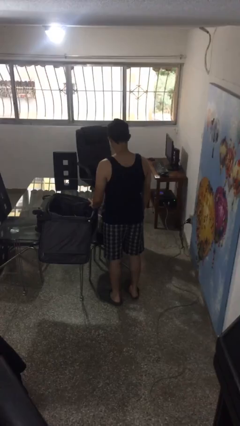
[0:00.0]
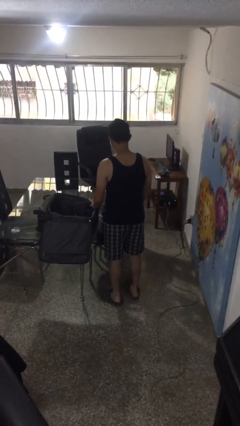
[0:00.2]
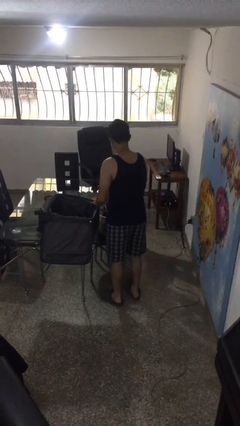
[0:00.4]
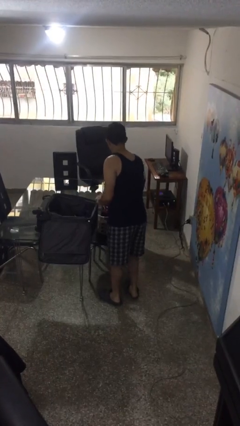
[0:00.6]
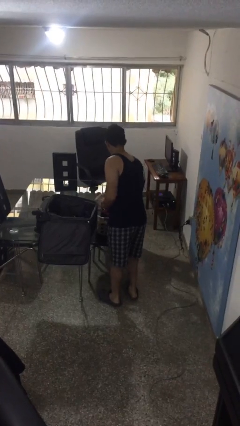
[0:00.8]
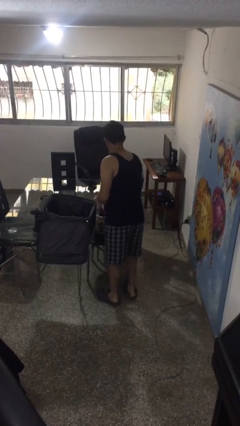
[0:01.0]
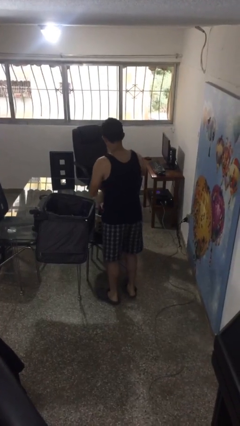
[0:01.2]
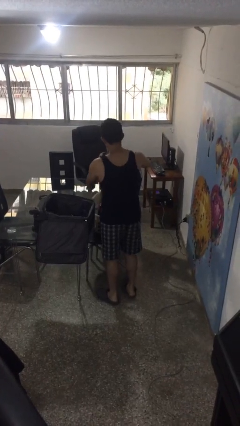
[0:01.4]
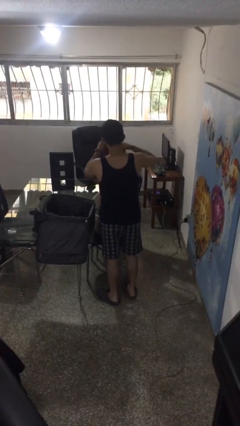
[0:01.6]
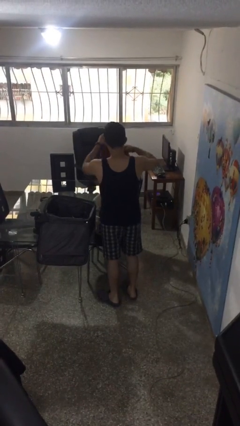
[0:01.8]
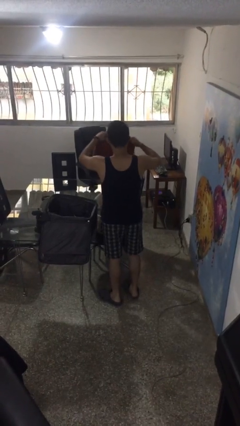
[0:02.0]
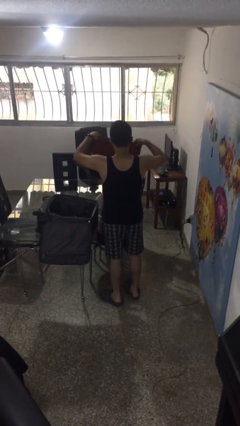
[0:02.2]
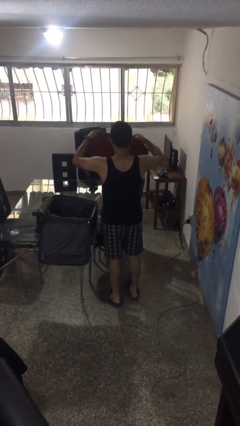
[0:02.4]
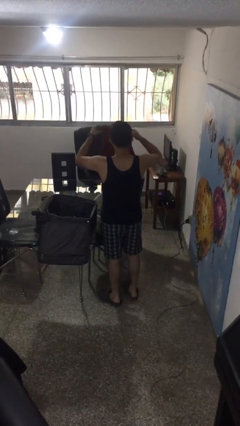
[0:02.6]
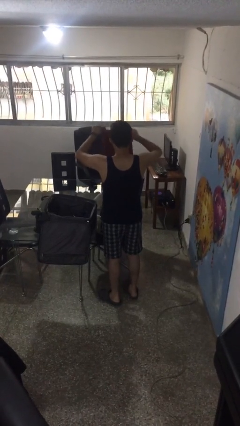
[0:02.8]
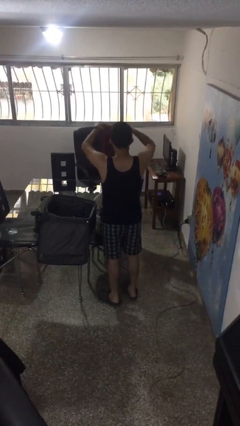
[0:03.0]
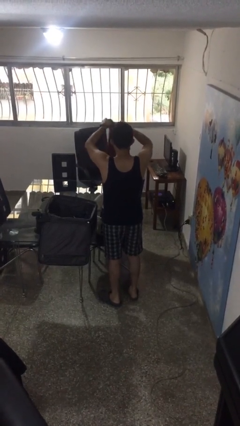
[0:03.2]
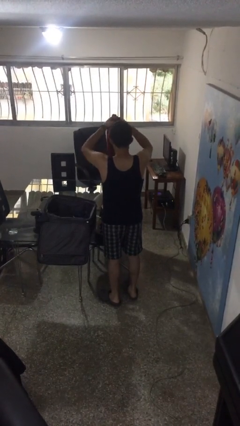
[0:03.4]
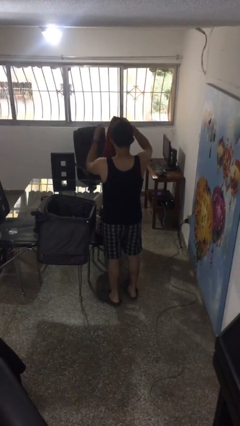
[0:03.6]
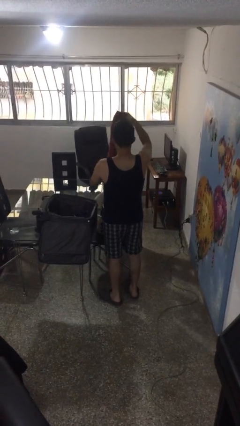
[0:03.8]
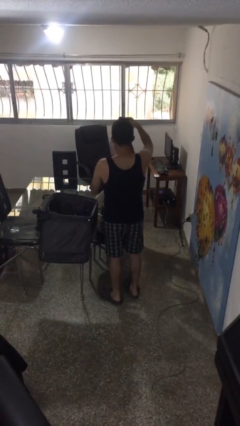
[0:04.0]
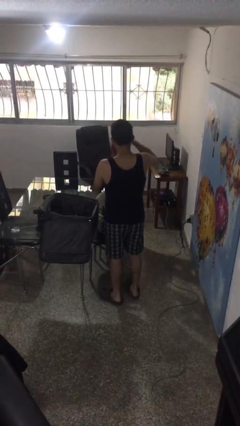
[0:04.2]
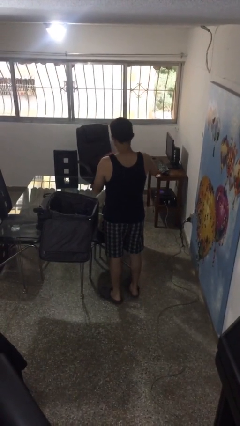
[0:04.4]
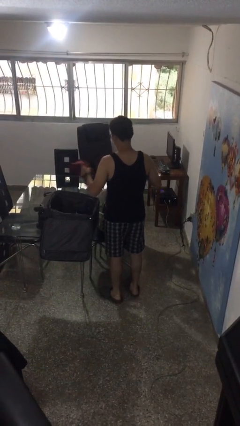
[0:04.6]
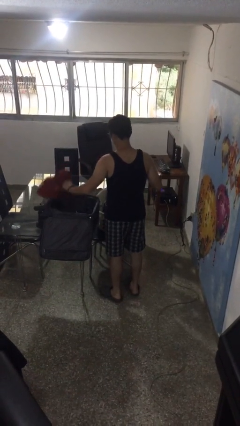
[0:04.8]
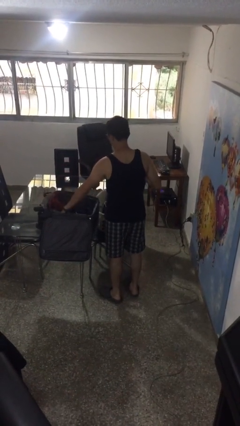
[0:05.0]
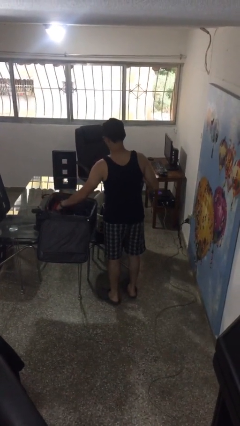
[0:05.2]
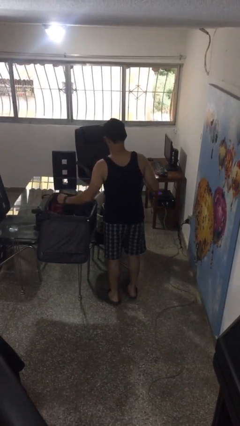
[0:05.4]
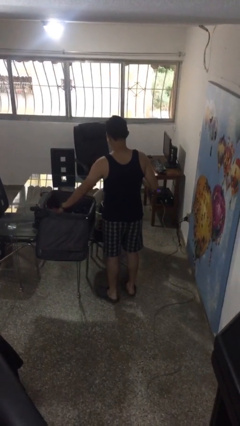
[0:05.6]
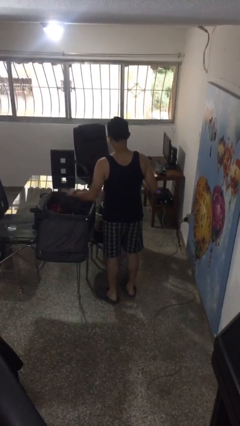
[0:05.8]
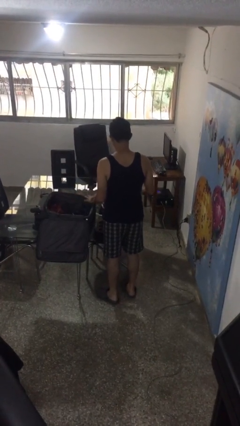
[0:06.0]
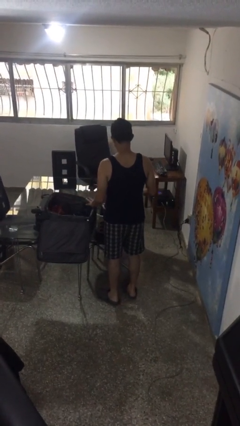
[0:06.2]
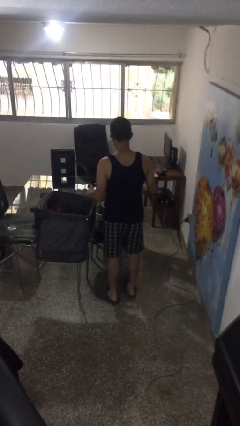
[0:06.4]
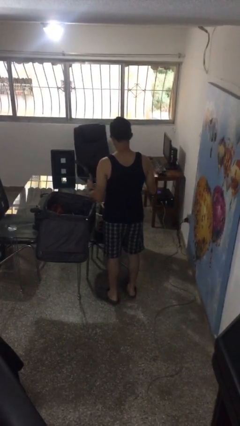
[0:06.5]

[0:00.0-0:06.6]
person loads clothes into suitcase

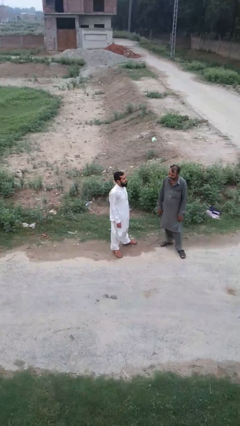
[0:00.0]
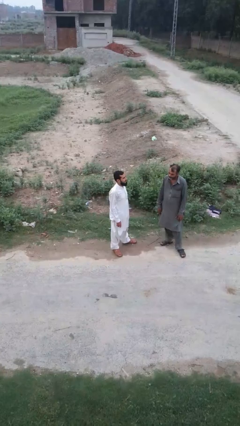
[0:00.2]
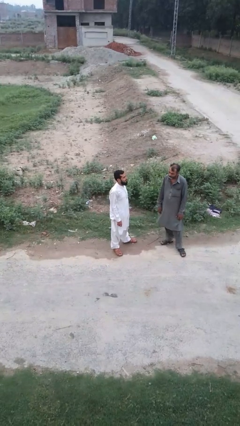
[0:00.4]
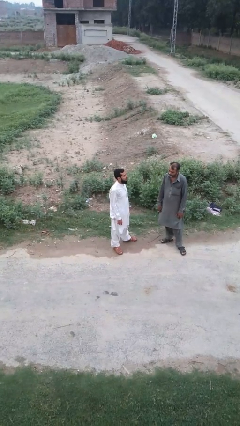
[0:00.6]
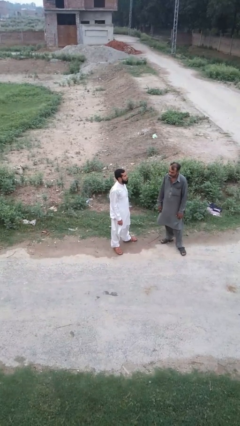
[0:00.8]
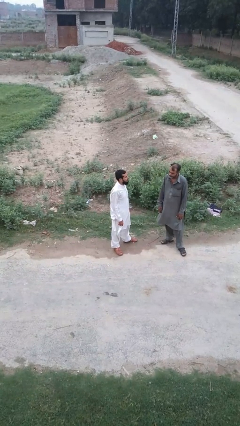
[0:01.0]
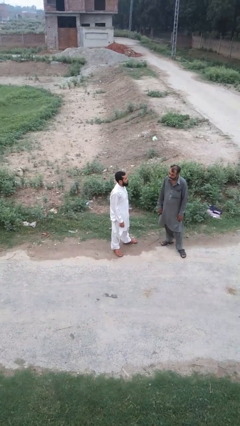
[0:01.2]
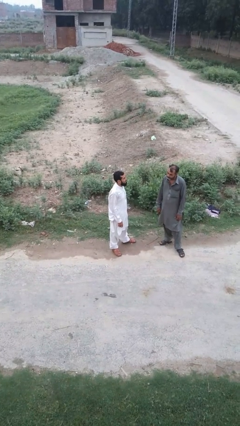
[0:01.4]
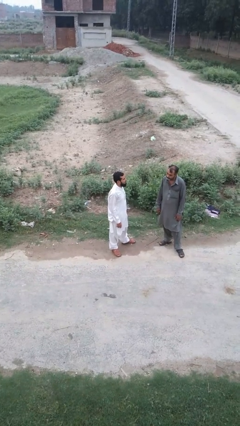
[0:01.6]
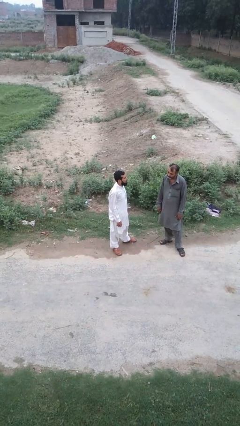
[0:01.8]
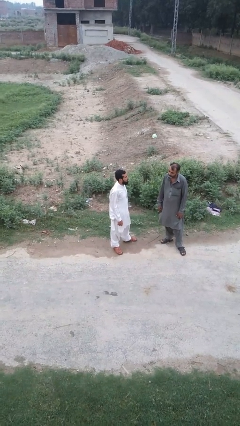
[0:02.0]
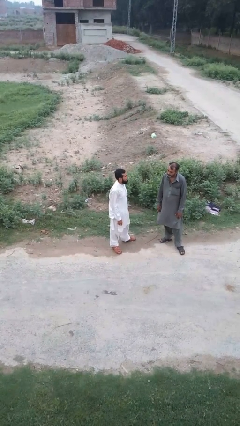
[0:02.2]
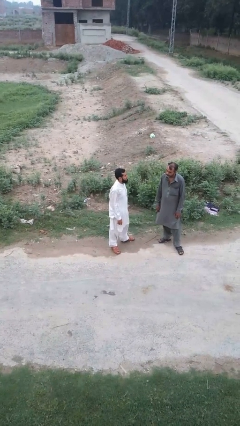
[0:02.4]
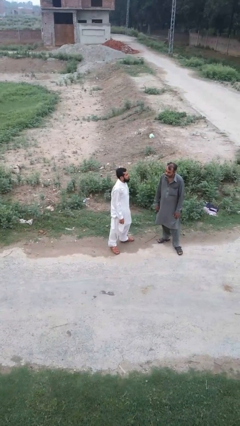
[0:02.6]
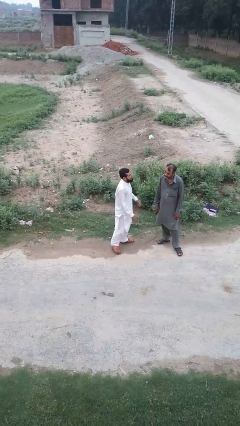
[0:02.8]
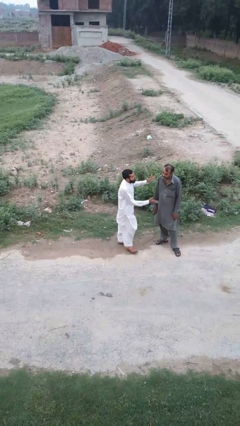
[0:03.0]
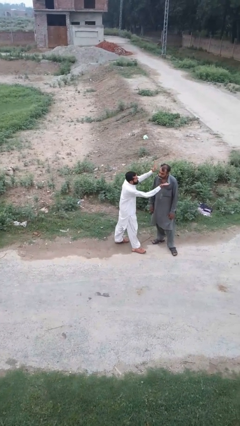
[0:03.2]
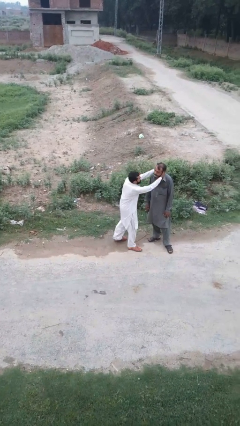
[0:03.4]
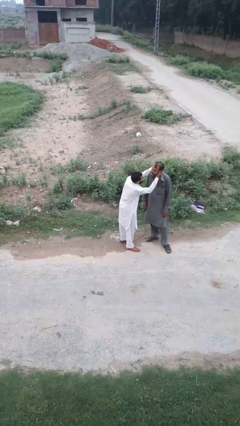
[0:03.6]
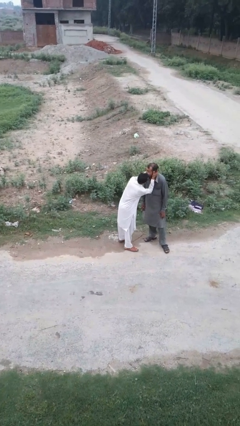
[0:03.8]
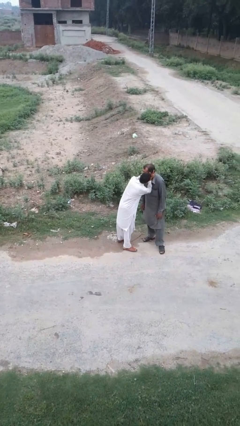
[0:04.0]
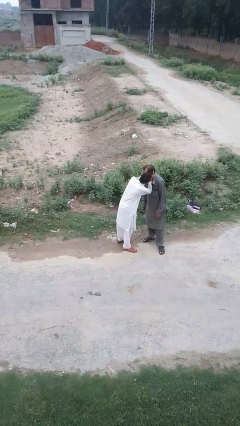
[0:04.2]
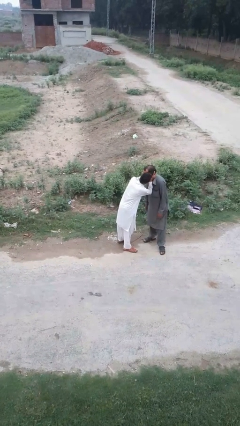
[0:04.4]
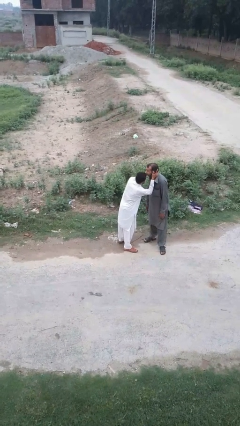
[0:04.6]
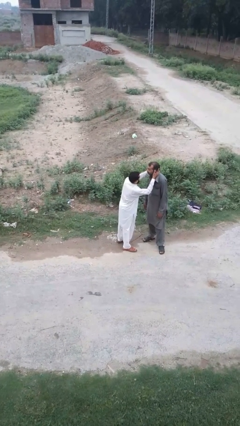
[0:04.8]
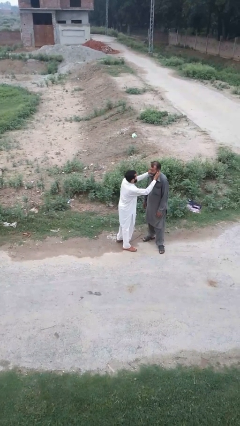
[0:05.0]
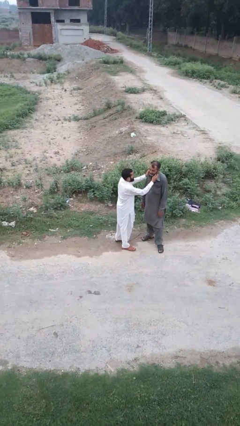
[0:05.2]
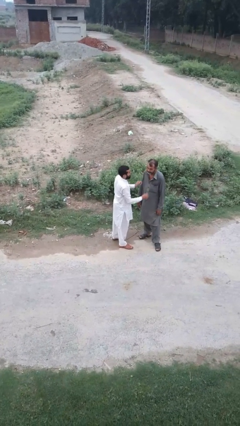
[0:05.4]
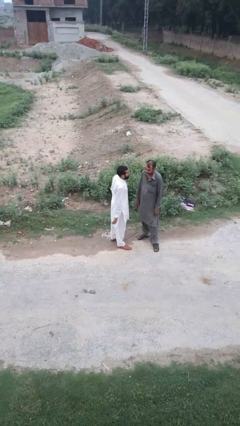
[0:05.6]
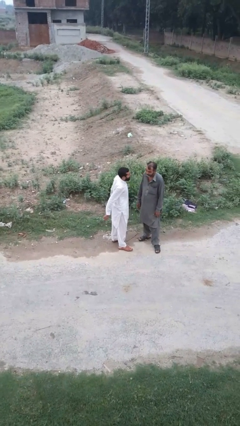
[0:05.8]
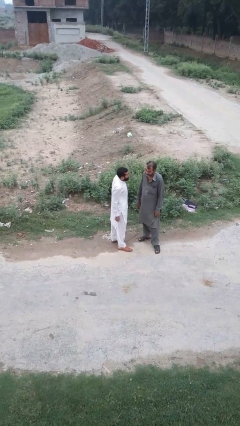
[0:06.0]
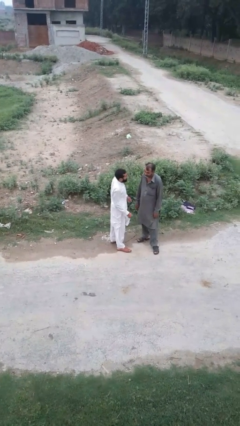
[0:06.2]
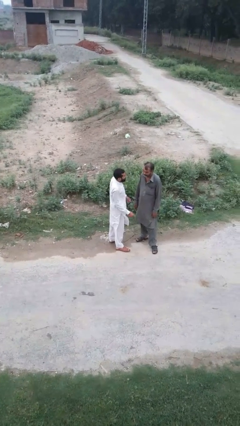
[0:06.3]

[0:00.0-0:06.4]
person kisses cheek of person

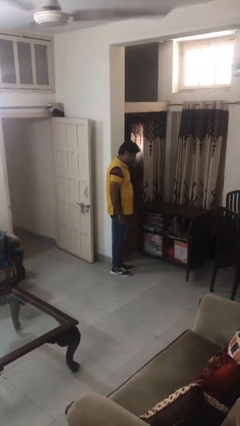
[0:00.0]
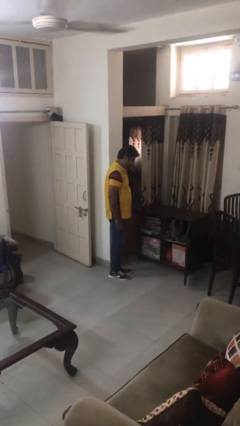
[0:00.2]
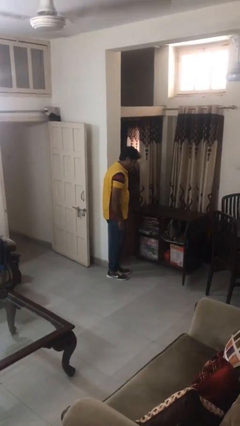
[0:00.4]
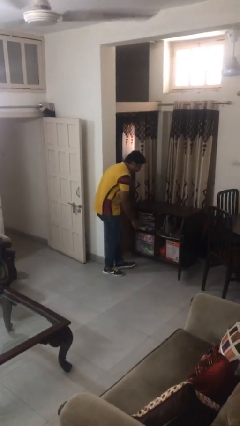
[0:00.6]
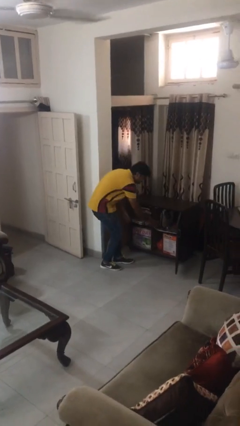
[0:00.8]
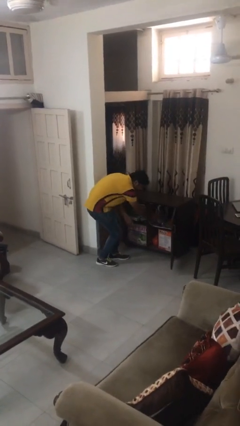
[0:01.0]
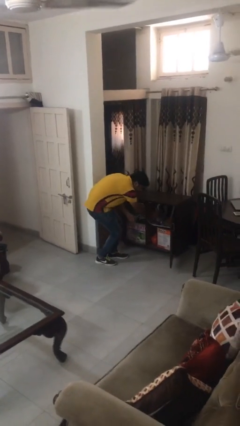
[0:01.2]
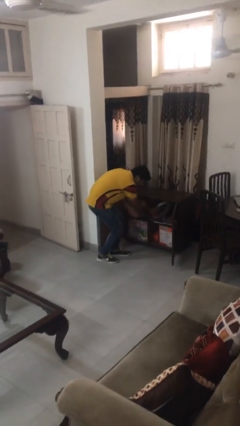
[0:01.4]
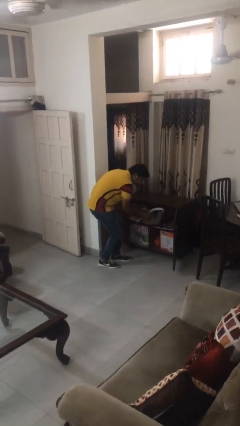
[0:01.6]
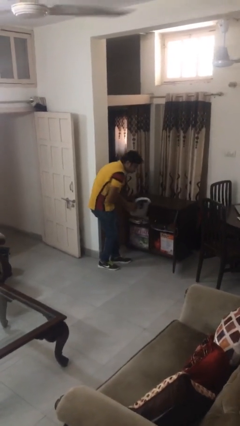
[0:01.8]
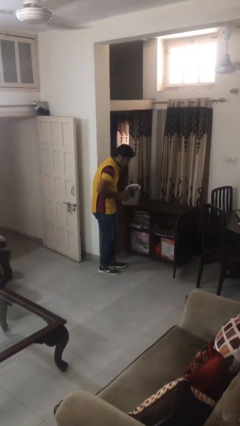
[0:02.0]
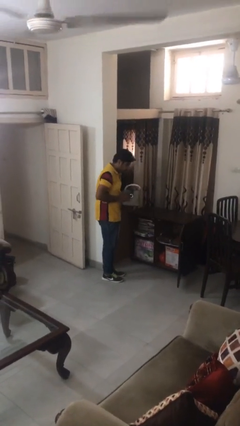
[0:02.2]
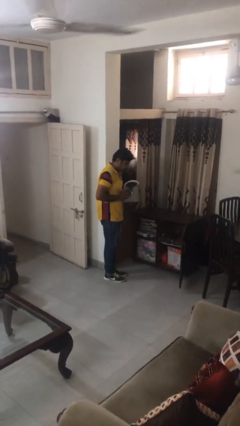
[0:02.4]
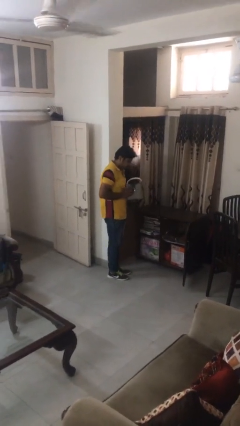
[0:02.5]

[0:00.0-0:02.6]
person picks up object from cabinet

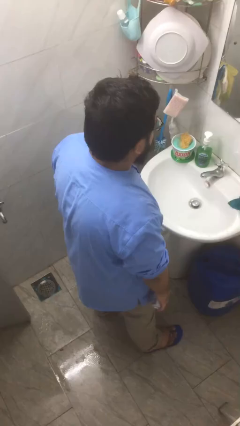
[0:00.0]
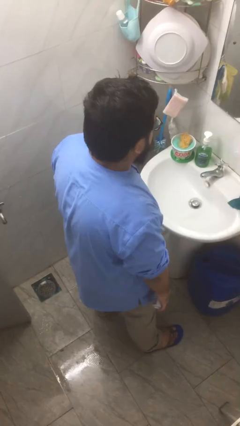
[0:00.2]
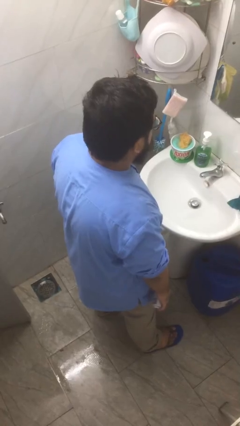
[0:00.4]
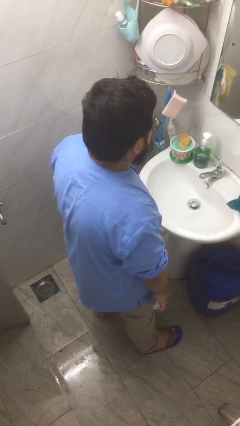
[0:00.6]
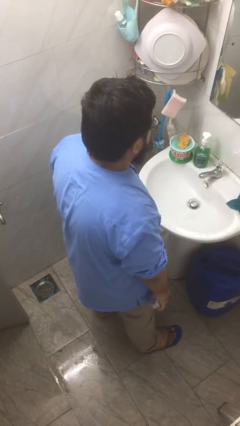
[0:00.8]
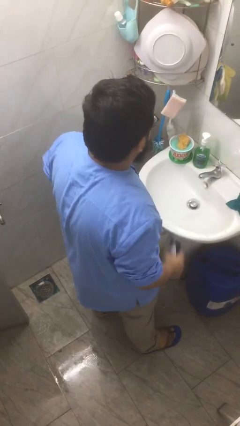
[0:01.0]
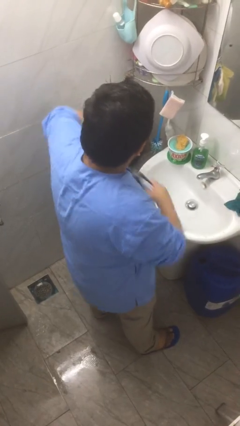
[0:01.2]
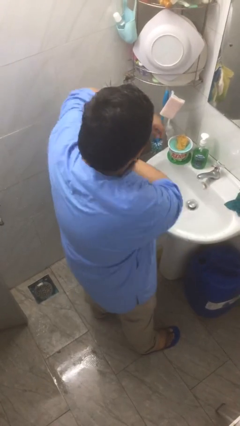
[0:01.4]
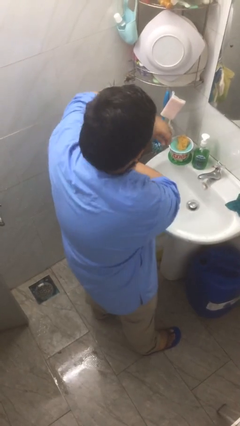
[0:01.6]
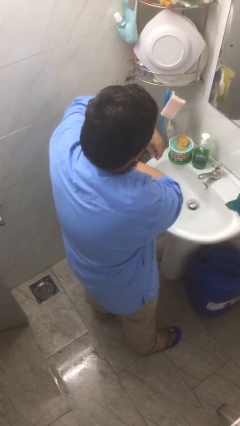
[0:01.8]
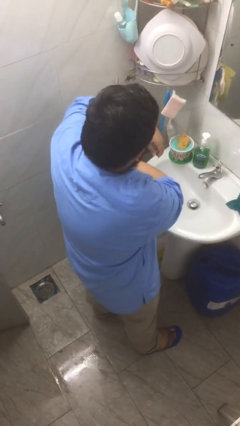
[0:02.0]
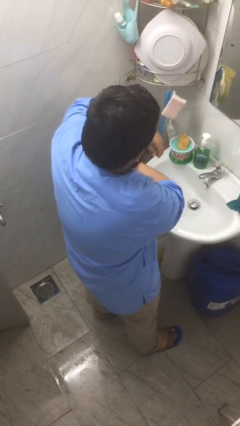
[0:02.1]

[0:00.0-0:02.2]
person applies deodorant

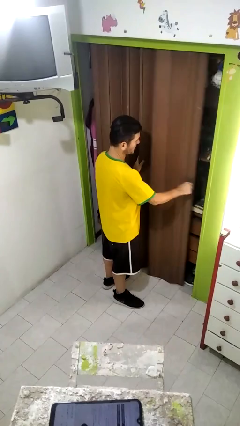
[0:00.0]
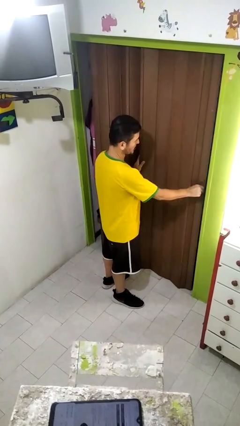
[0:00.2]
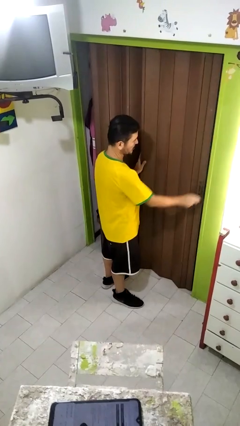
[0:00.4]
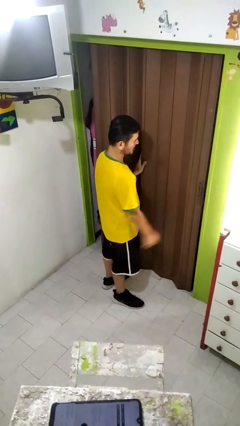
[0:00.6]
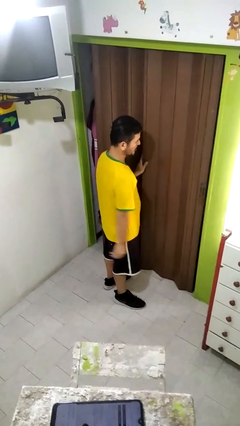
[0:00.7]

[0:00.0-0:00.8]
person closes closet door
